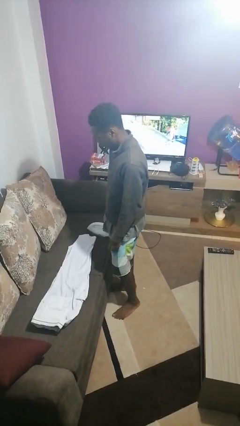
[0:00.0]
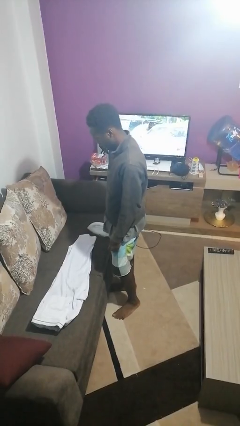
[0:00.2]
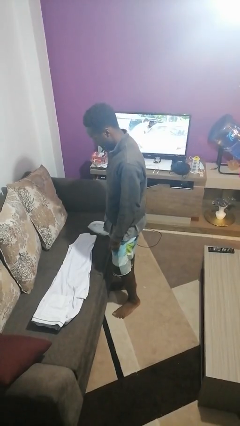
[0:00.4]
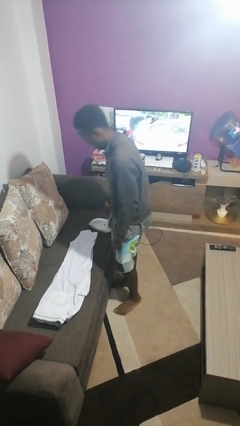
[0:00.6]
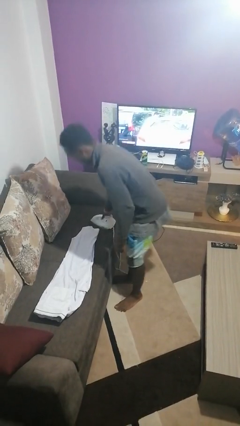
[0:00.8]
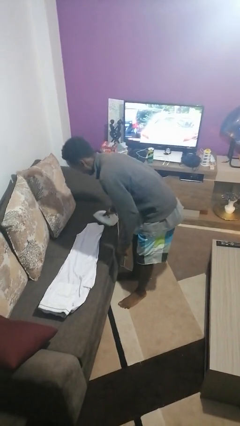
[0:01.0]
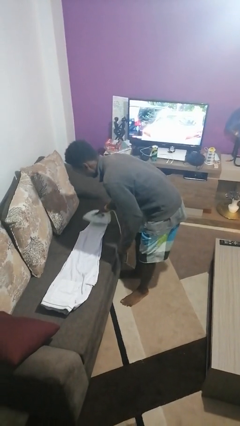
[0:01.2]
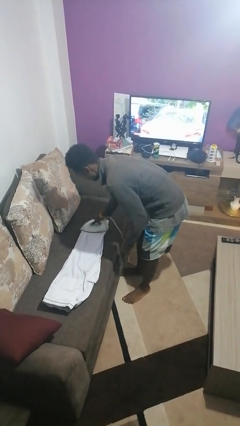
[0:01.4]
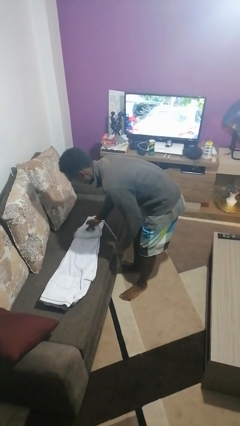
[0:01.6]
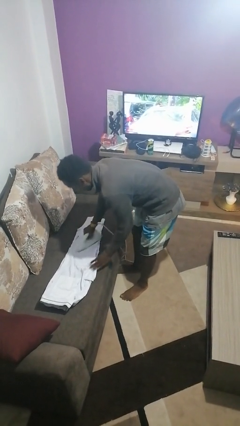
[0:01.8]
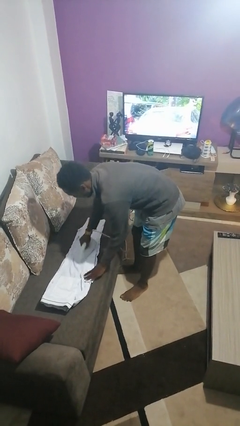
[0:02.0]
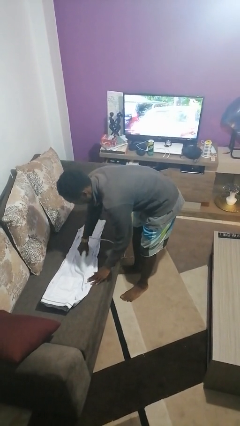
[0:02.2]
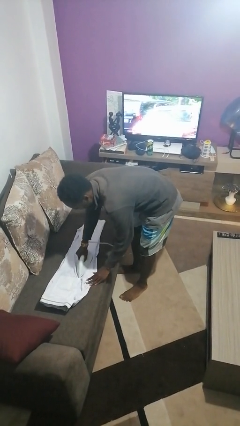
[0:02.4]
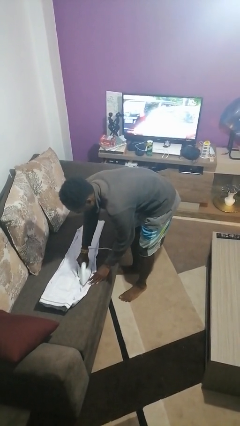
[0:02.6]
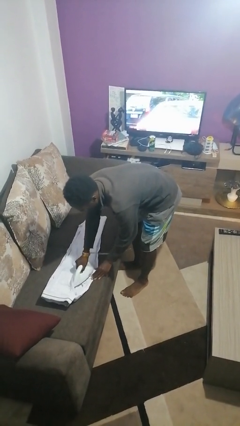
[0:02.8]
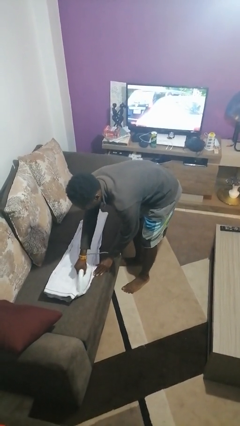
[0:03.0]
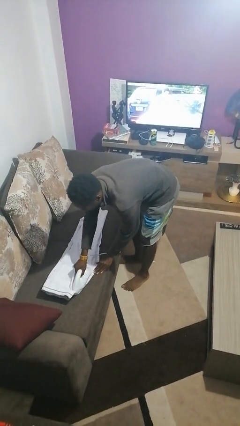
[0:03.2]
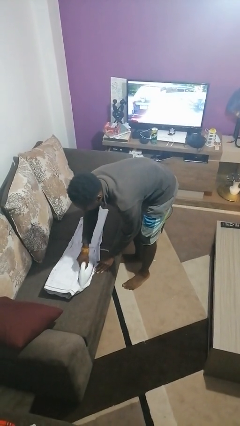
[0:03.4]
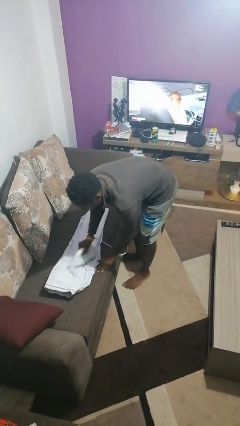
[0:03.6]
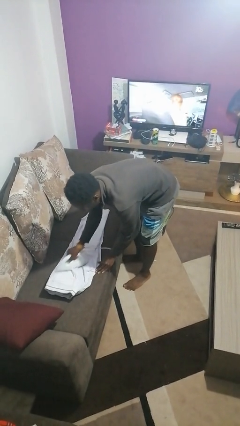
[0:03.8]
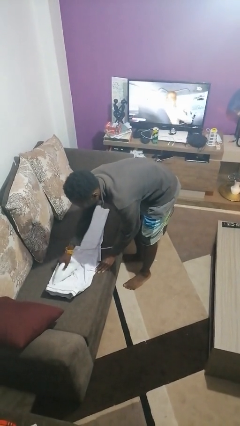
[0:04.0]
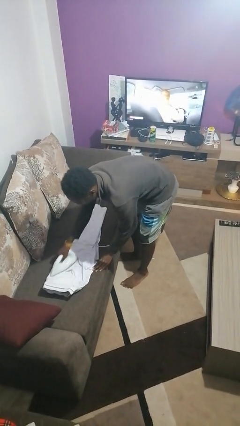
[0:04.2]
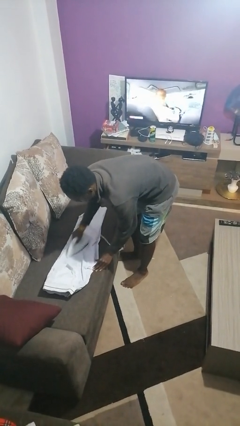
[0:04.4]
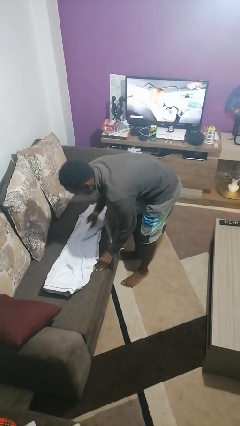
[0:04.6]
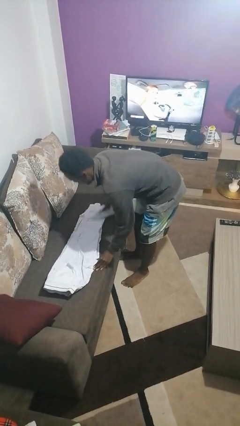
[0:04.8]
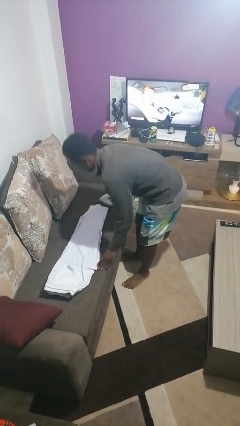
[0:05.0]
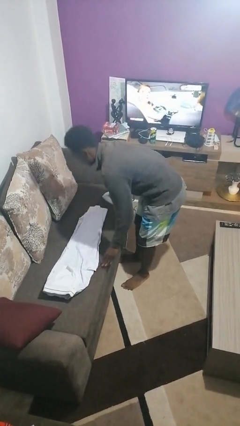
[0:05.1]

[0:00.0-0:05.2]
person irons clothes

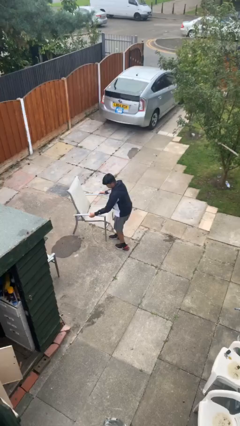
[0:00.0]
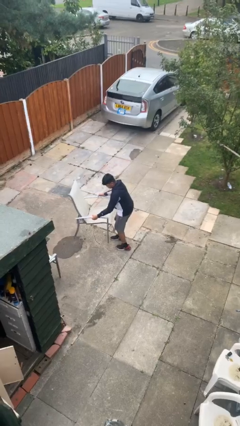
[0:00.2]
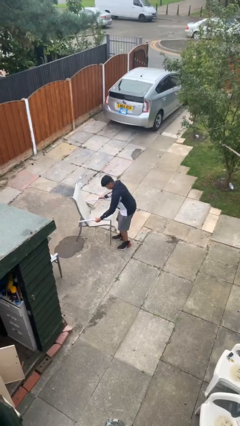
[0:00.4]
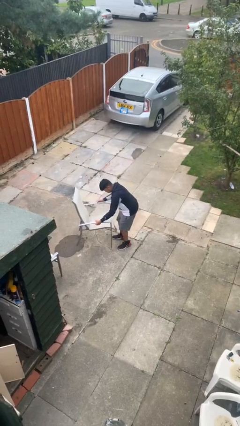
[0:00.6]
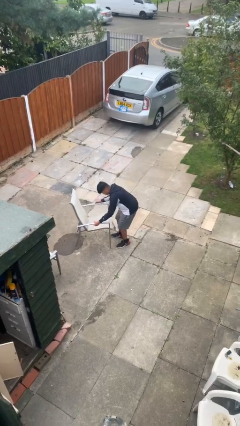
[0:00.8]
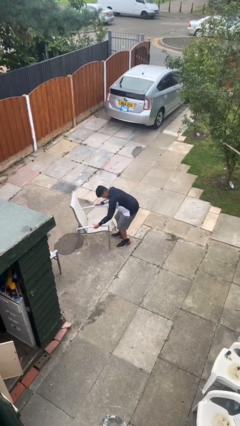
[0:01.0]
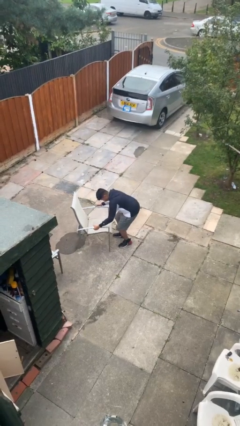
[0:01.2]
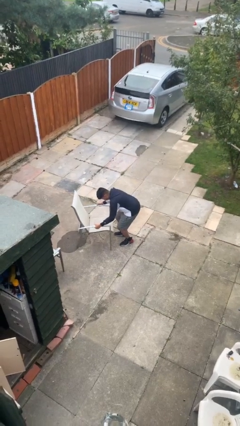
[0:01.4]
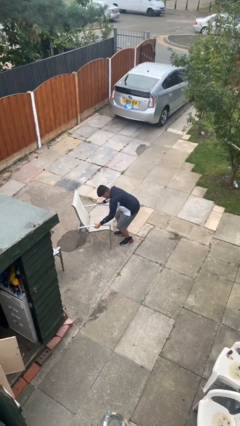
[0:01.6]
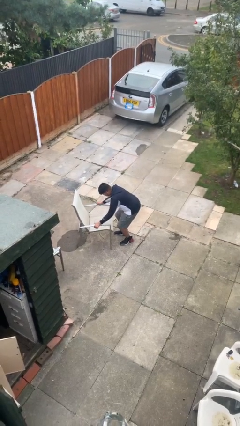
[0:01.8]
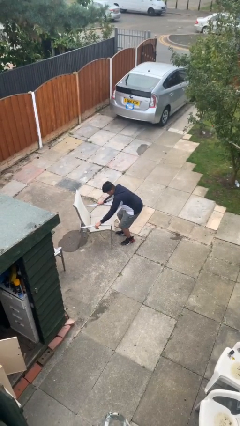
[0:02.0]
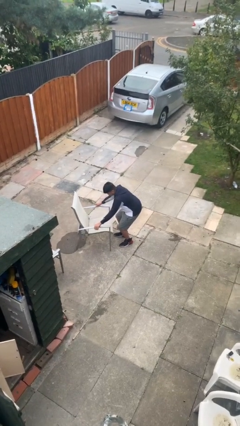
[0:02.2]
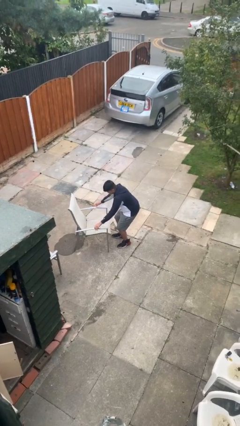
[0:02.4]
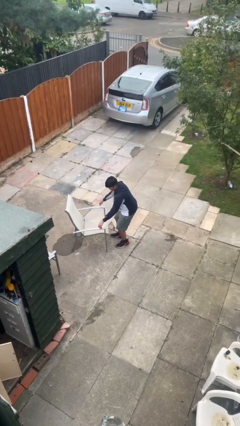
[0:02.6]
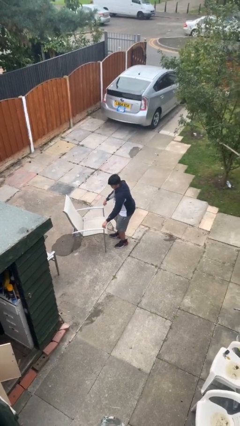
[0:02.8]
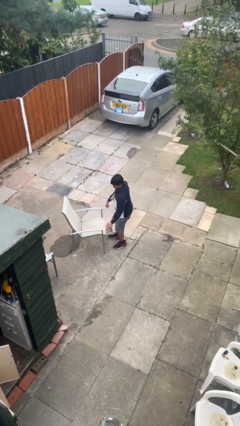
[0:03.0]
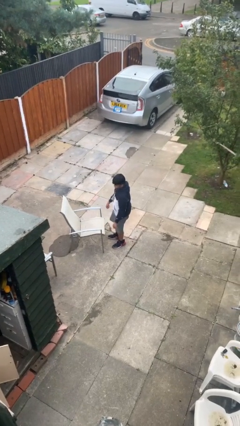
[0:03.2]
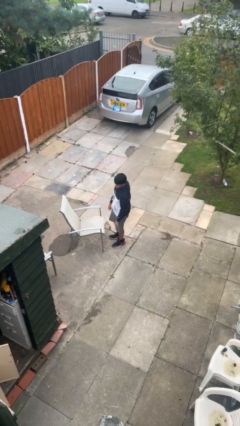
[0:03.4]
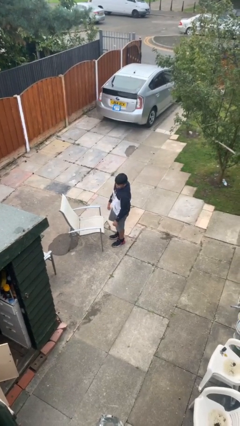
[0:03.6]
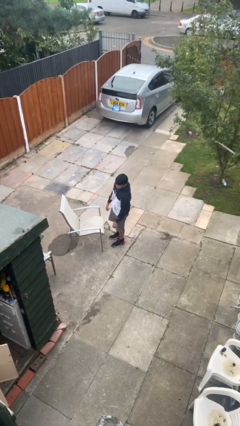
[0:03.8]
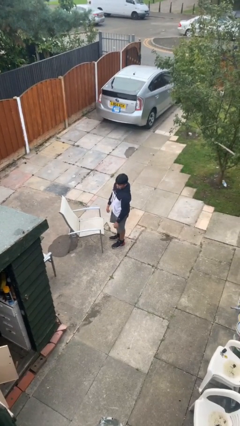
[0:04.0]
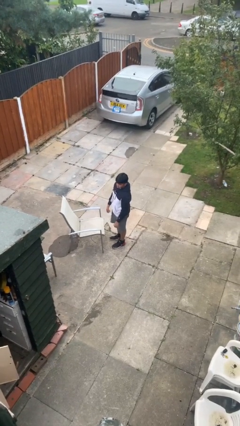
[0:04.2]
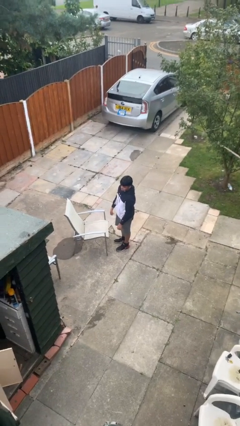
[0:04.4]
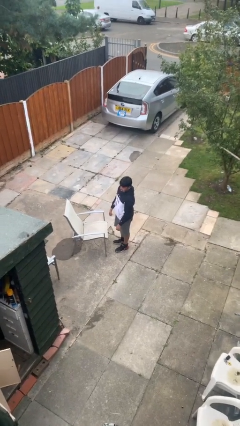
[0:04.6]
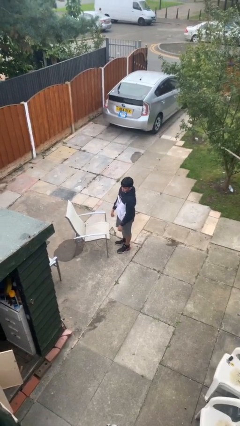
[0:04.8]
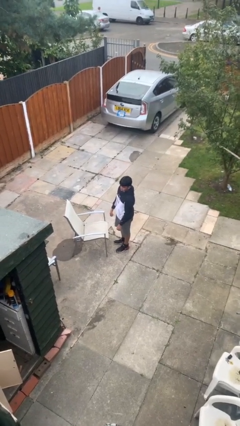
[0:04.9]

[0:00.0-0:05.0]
person puts down object on floor

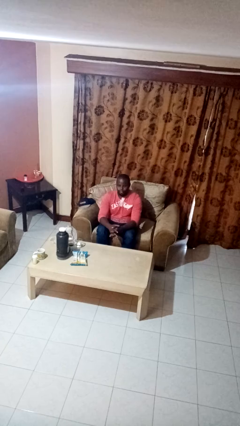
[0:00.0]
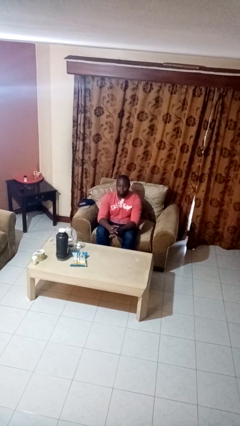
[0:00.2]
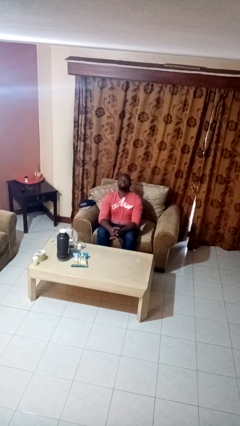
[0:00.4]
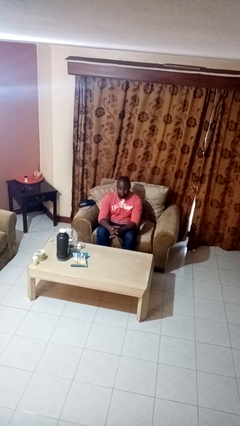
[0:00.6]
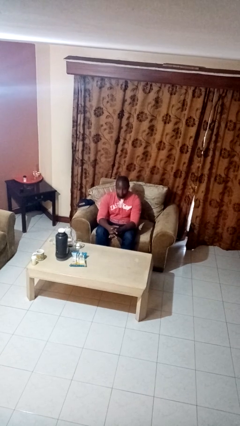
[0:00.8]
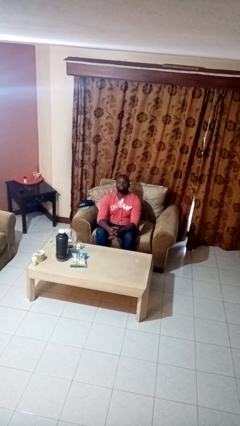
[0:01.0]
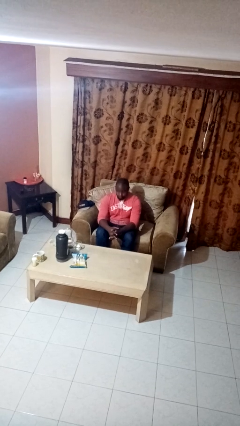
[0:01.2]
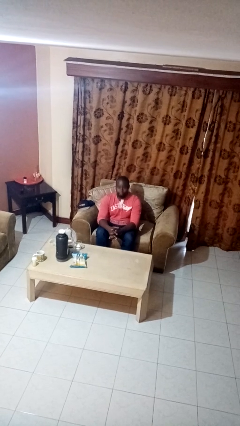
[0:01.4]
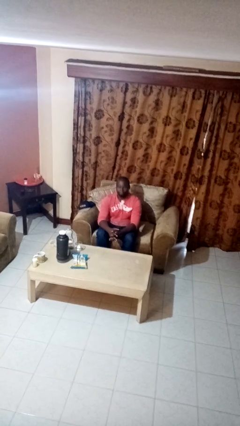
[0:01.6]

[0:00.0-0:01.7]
person nods head

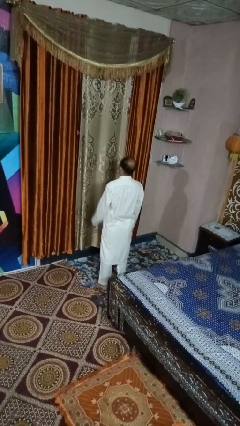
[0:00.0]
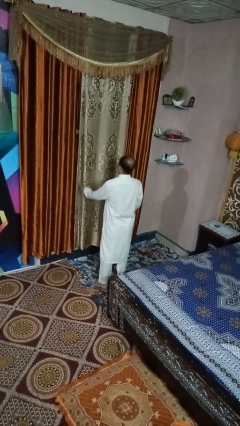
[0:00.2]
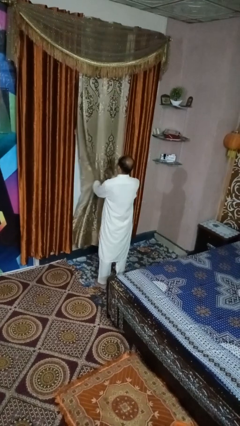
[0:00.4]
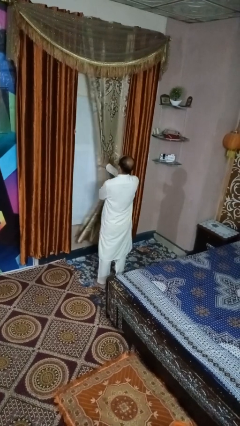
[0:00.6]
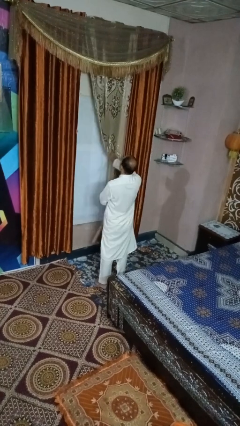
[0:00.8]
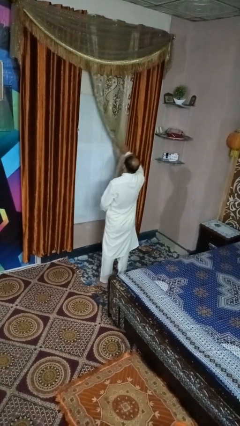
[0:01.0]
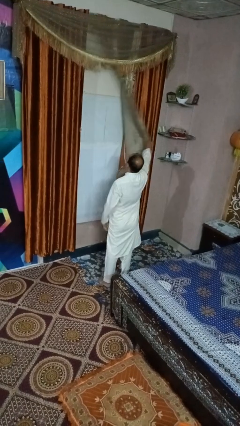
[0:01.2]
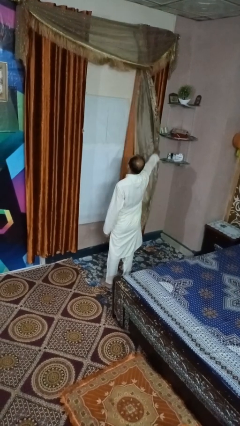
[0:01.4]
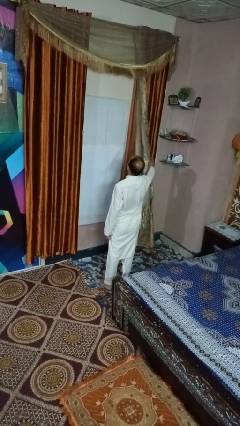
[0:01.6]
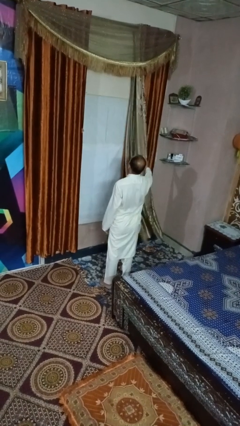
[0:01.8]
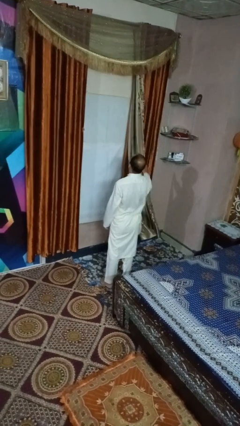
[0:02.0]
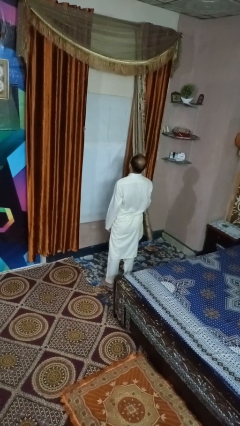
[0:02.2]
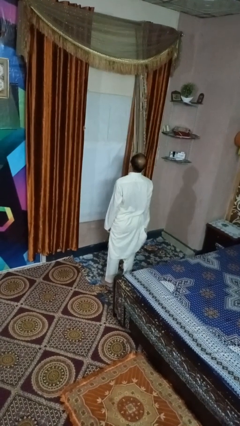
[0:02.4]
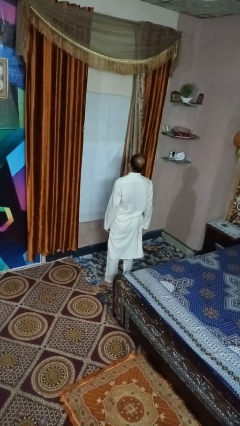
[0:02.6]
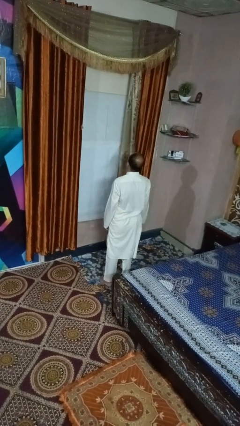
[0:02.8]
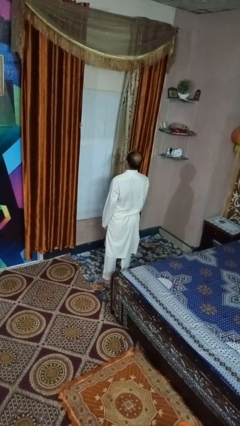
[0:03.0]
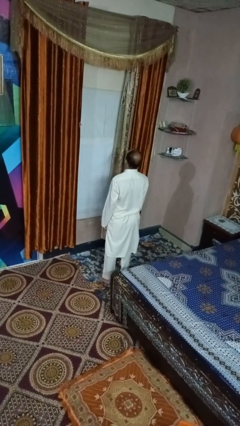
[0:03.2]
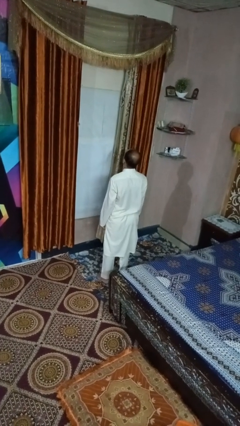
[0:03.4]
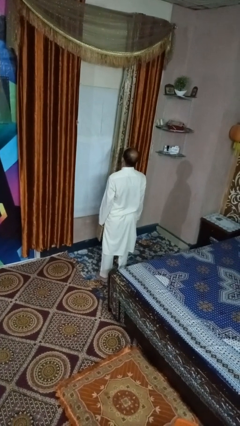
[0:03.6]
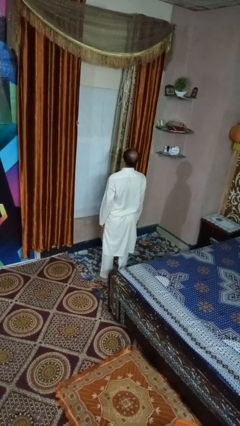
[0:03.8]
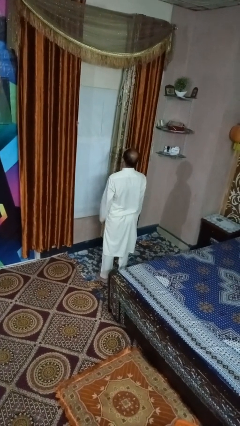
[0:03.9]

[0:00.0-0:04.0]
person opens curtains

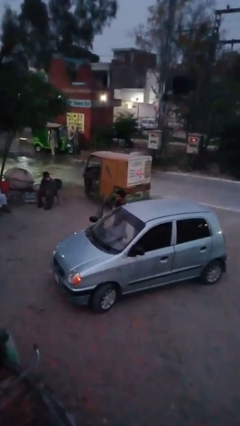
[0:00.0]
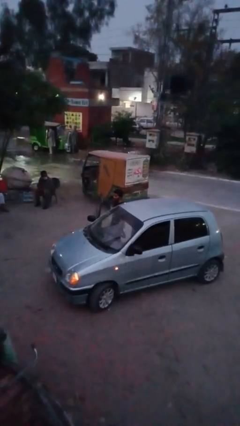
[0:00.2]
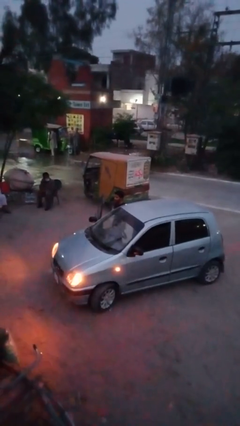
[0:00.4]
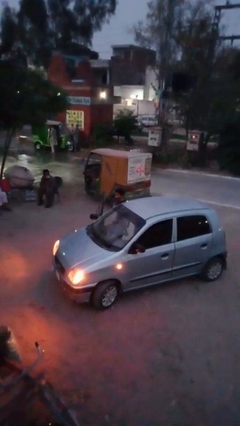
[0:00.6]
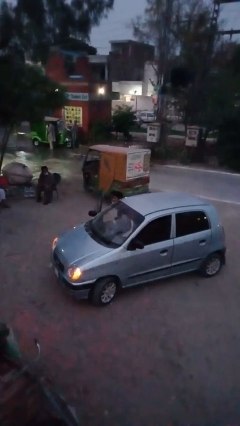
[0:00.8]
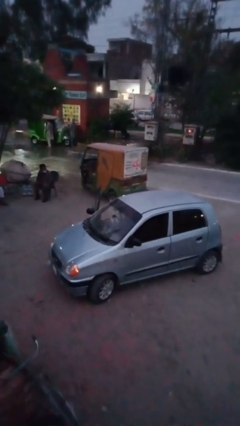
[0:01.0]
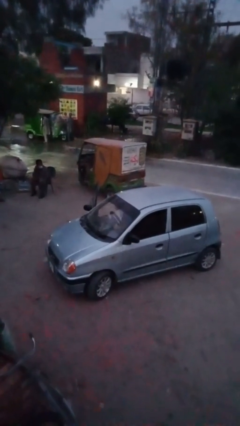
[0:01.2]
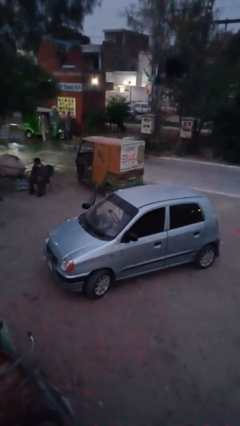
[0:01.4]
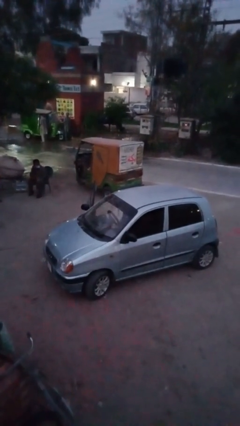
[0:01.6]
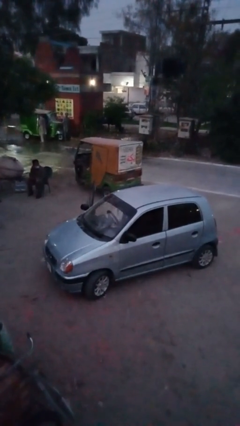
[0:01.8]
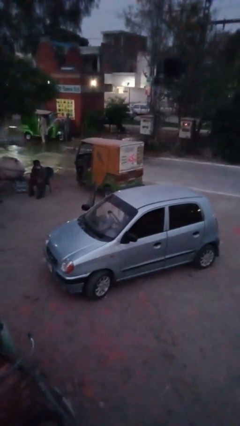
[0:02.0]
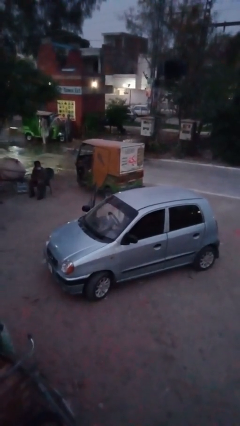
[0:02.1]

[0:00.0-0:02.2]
person enters car
